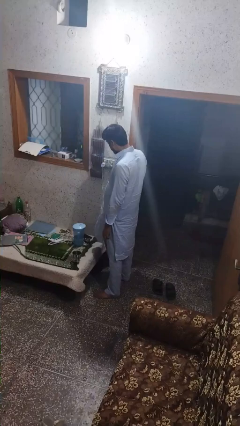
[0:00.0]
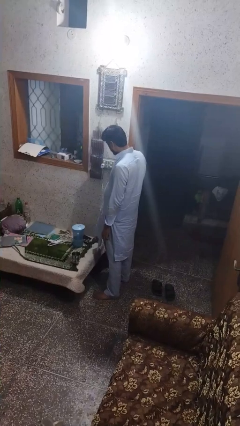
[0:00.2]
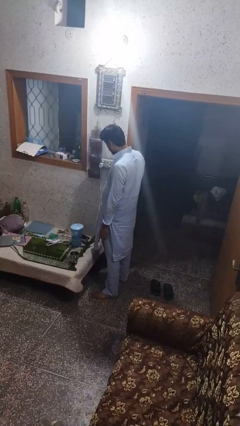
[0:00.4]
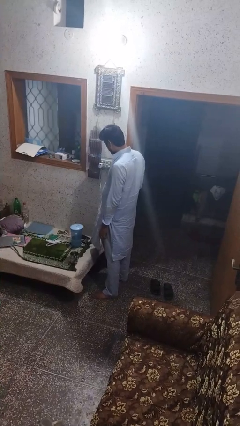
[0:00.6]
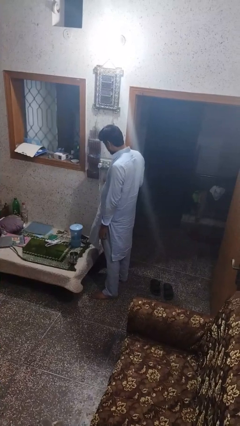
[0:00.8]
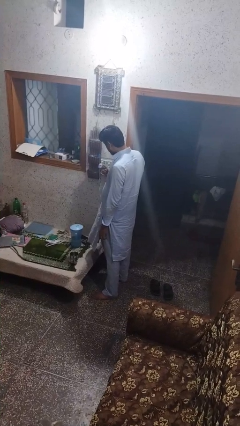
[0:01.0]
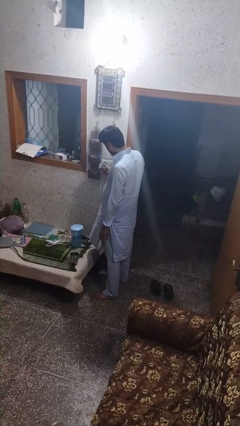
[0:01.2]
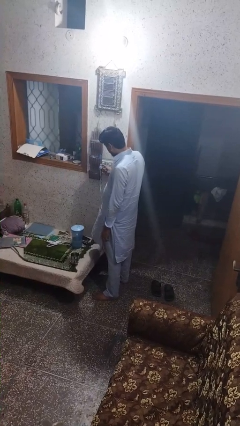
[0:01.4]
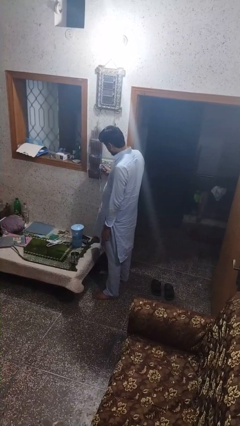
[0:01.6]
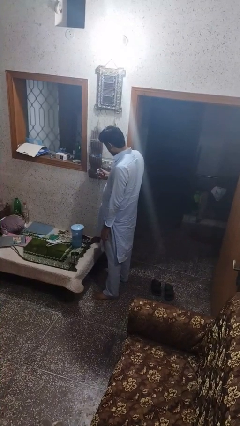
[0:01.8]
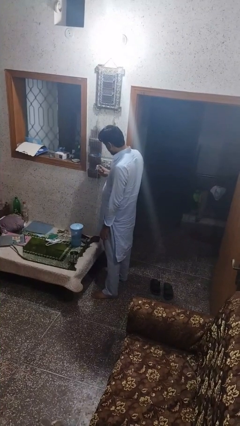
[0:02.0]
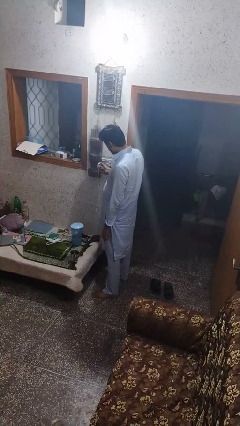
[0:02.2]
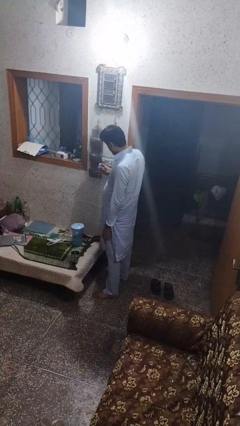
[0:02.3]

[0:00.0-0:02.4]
person unplugs from electrical socket

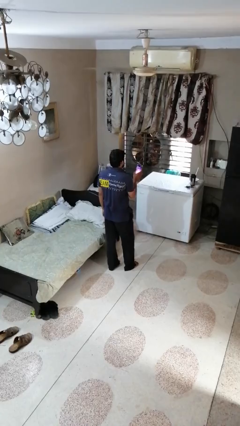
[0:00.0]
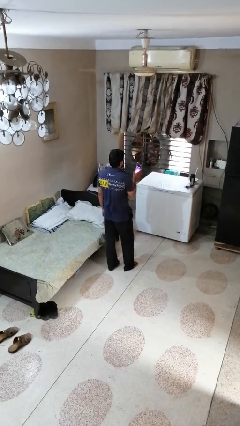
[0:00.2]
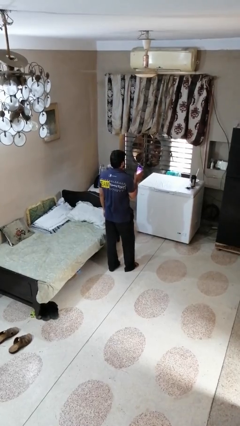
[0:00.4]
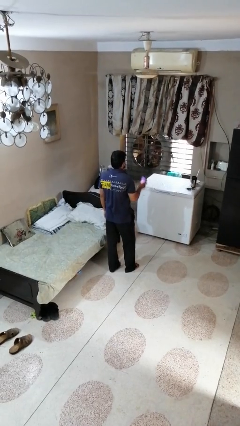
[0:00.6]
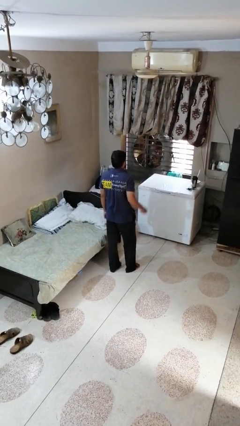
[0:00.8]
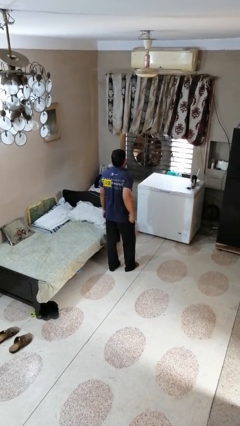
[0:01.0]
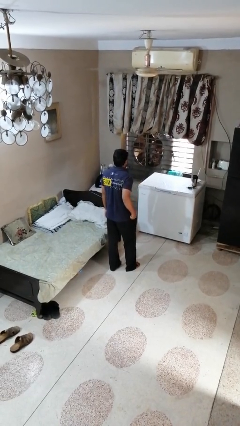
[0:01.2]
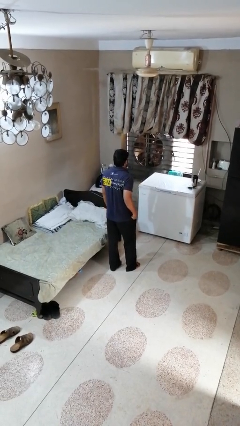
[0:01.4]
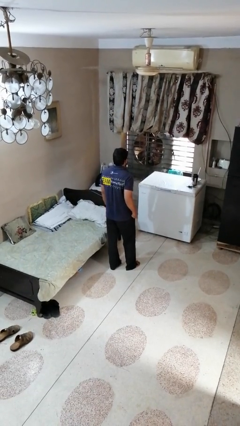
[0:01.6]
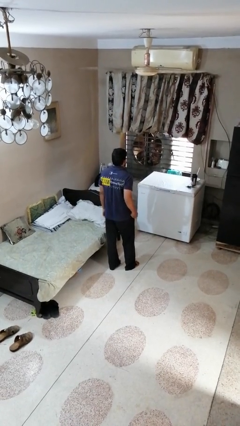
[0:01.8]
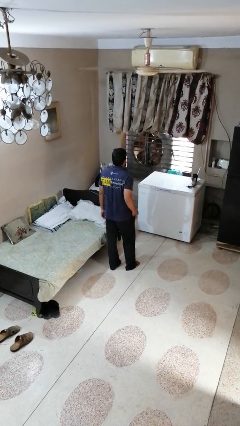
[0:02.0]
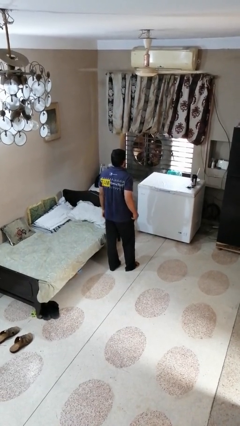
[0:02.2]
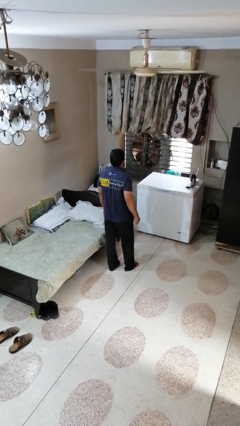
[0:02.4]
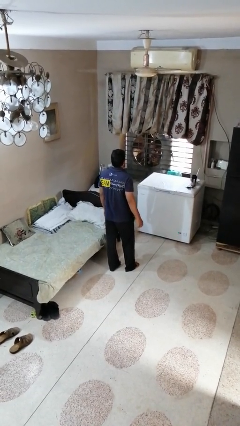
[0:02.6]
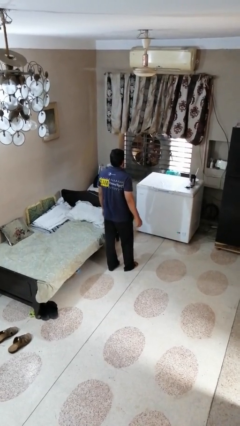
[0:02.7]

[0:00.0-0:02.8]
person puts phone into pocket

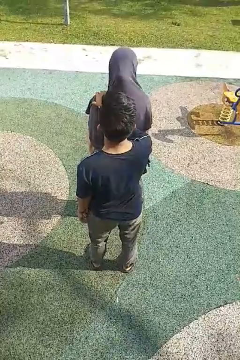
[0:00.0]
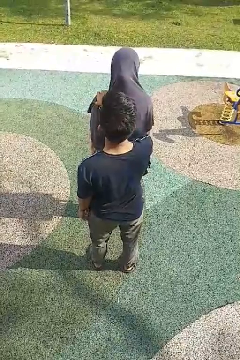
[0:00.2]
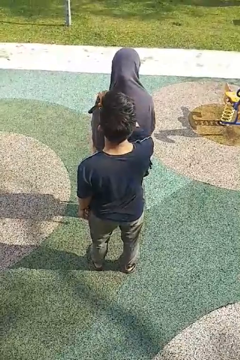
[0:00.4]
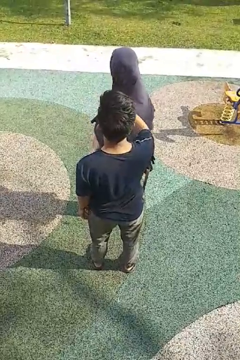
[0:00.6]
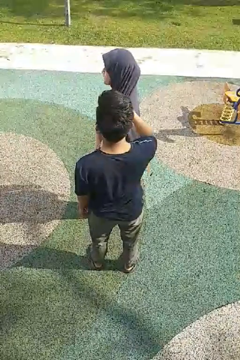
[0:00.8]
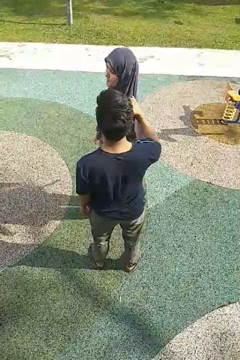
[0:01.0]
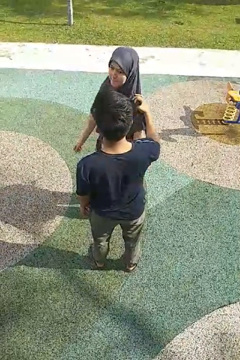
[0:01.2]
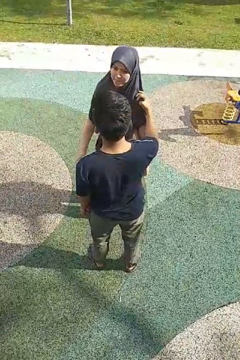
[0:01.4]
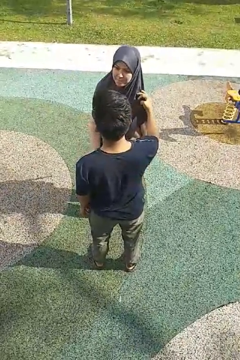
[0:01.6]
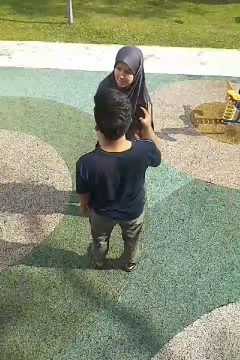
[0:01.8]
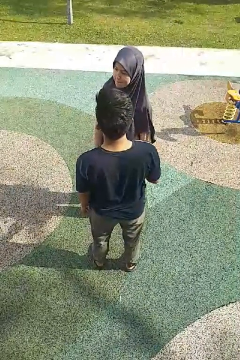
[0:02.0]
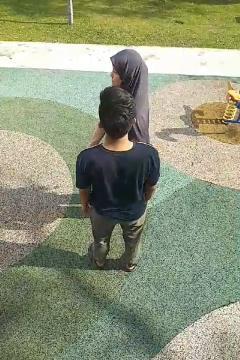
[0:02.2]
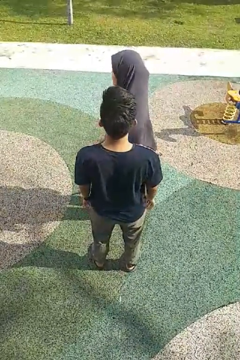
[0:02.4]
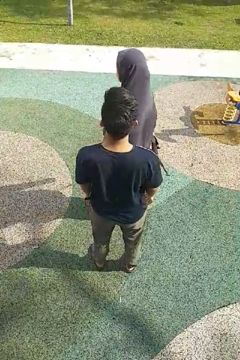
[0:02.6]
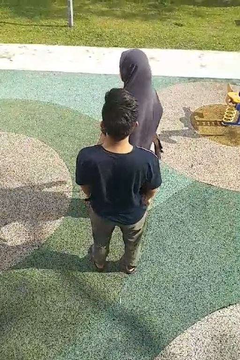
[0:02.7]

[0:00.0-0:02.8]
person spins person around

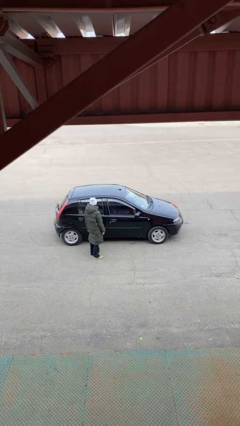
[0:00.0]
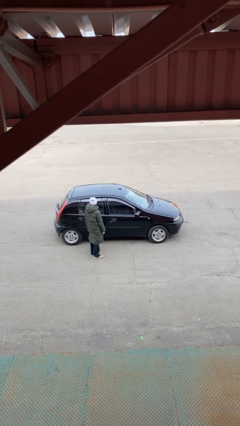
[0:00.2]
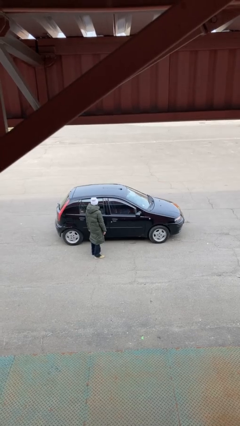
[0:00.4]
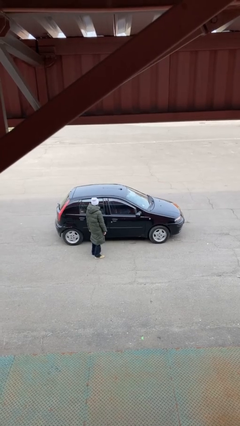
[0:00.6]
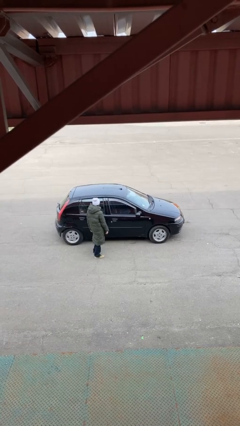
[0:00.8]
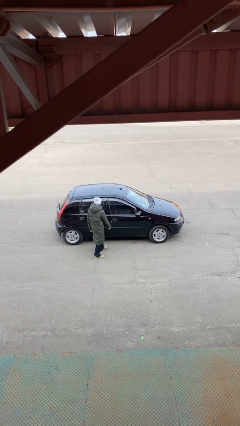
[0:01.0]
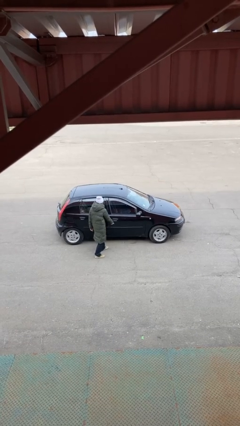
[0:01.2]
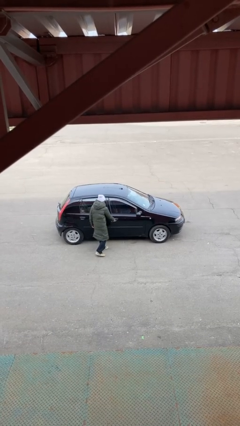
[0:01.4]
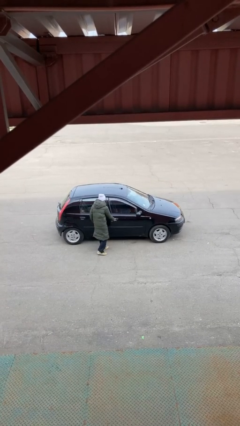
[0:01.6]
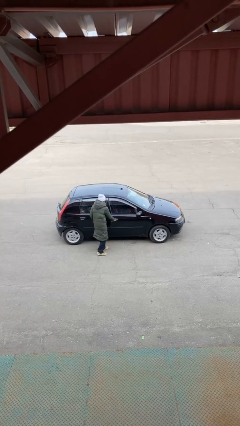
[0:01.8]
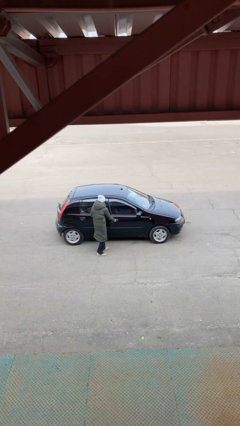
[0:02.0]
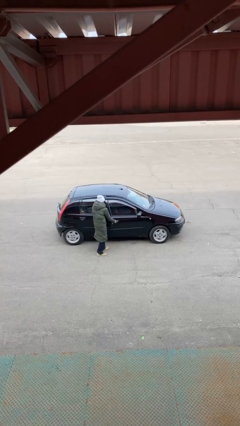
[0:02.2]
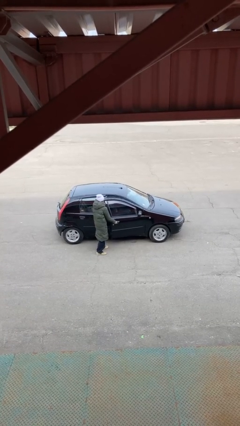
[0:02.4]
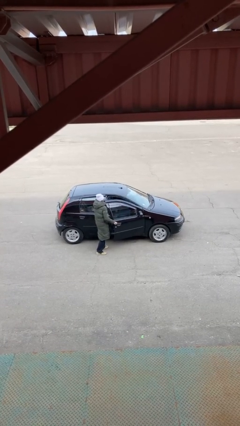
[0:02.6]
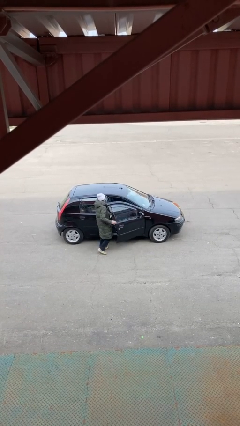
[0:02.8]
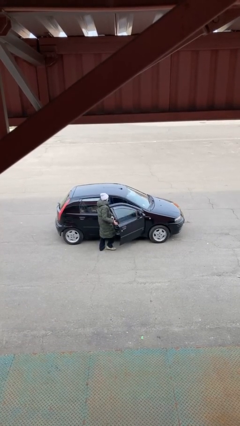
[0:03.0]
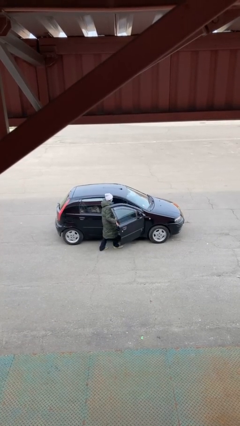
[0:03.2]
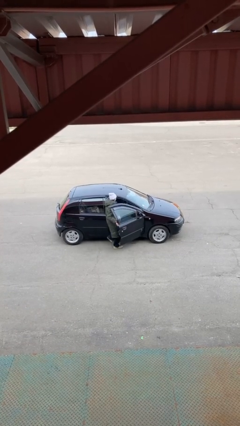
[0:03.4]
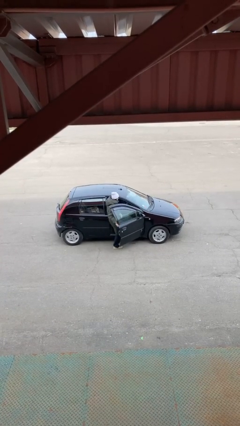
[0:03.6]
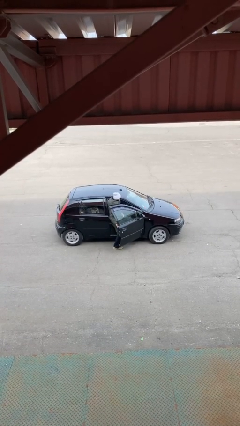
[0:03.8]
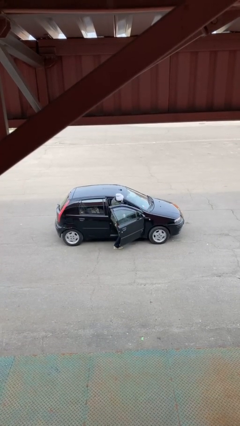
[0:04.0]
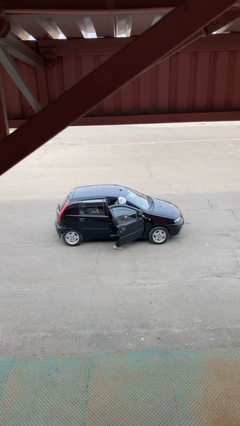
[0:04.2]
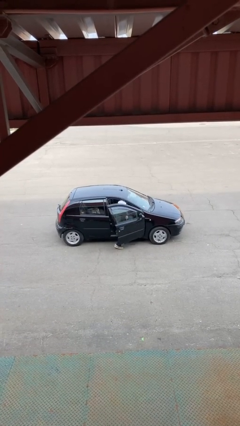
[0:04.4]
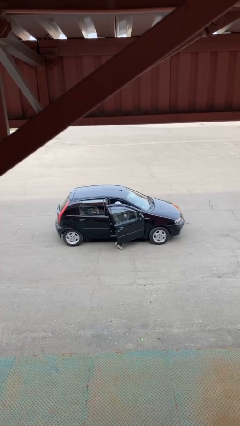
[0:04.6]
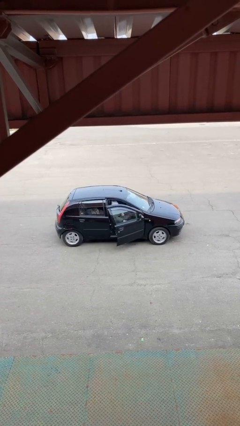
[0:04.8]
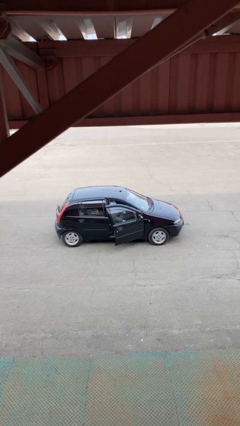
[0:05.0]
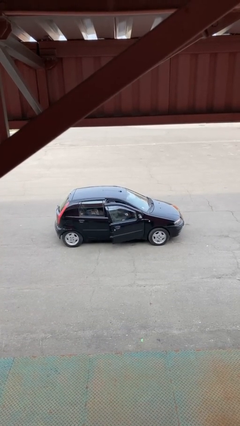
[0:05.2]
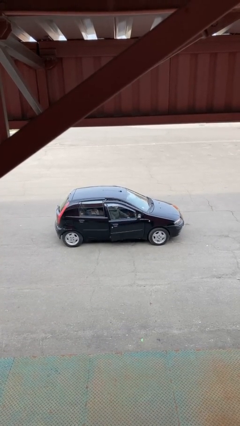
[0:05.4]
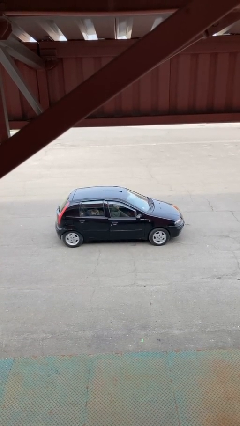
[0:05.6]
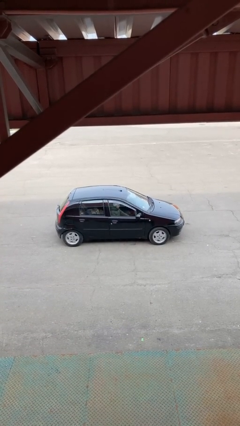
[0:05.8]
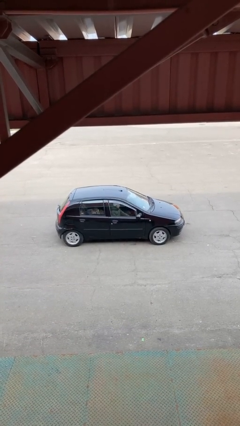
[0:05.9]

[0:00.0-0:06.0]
car picks up person

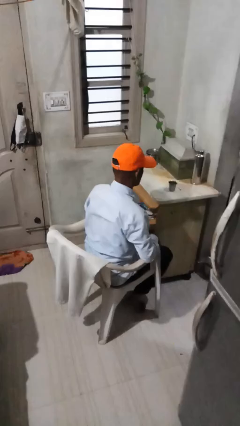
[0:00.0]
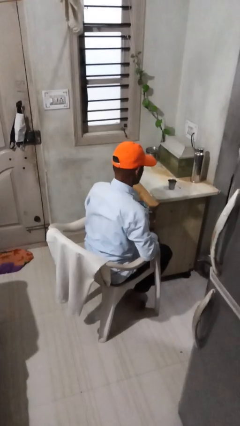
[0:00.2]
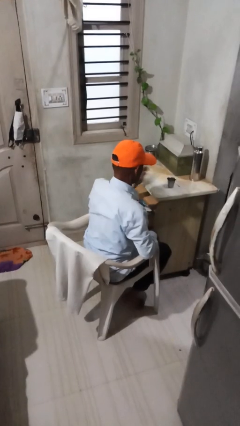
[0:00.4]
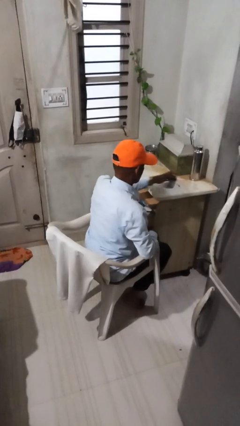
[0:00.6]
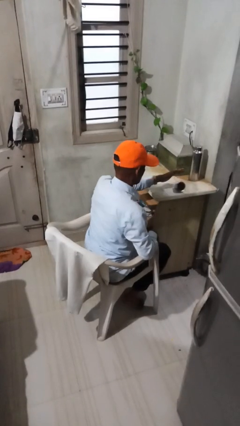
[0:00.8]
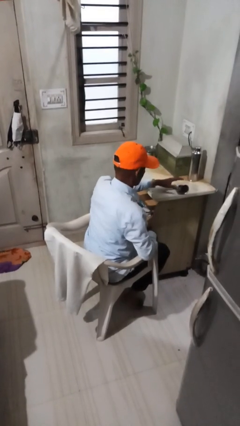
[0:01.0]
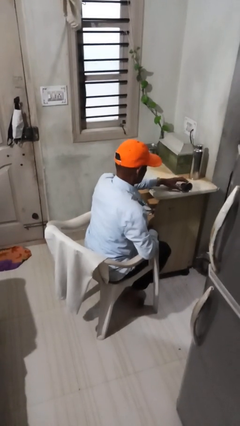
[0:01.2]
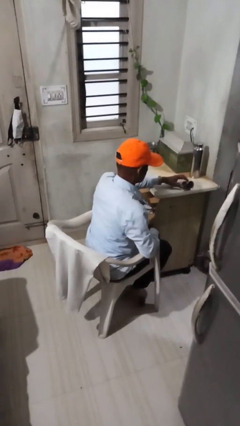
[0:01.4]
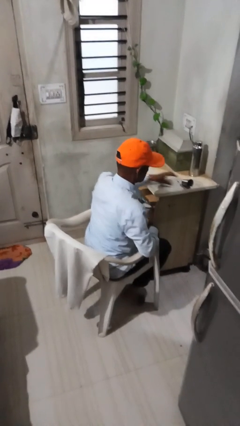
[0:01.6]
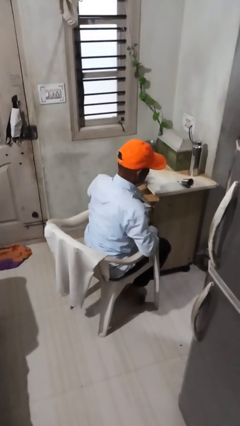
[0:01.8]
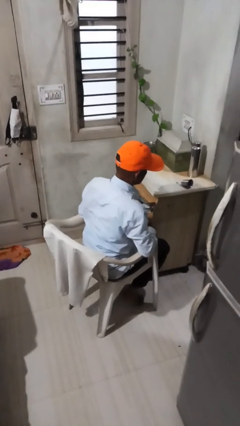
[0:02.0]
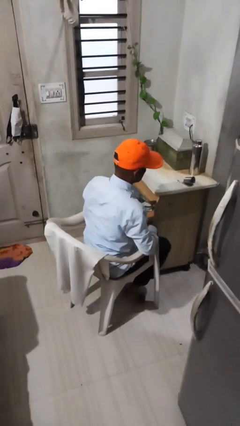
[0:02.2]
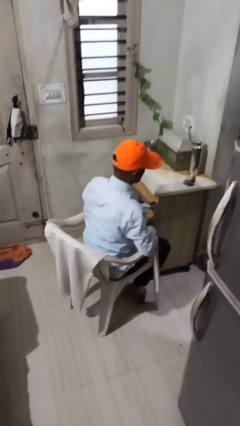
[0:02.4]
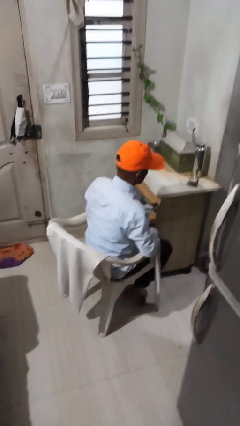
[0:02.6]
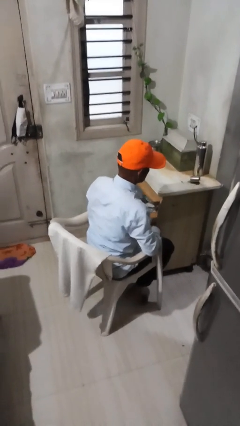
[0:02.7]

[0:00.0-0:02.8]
person knocks over glass

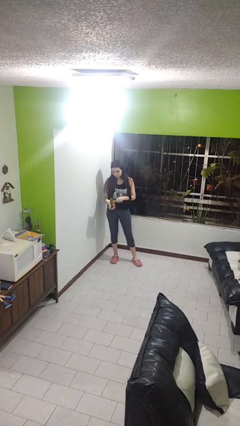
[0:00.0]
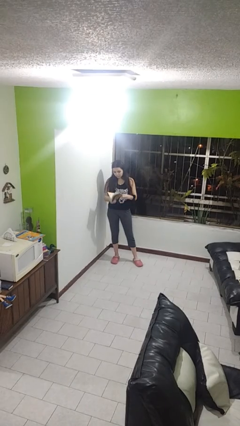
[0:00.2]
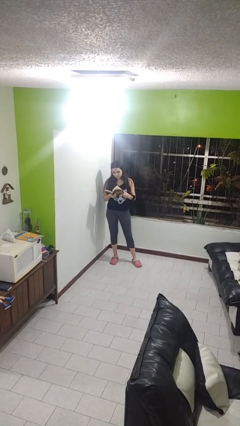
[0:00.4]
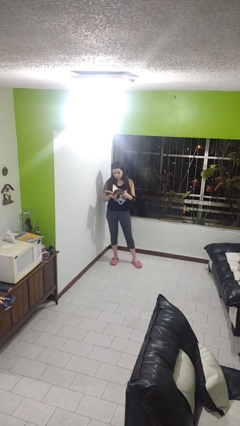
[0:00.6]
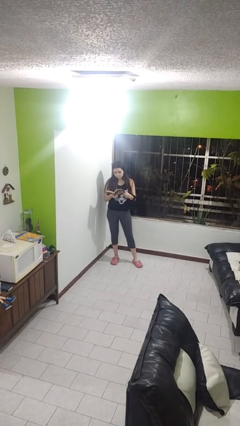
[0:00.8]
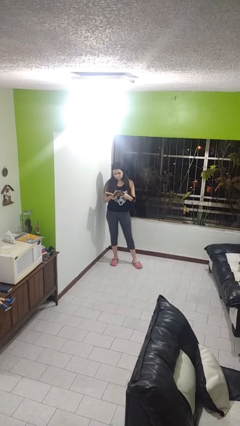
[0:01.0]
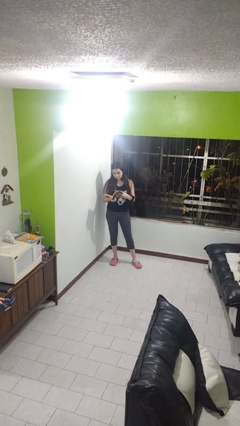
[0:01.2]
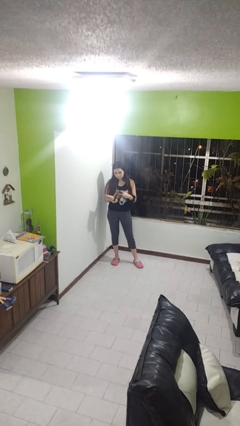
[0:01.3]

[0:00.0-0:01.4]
person reads book
